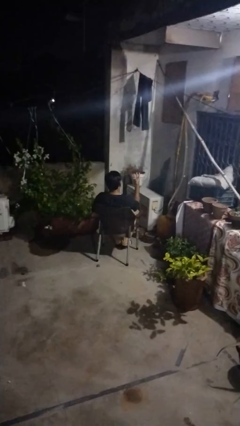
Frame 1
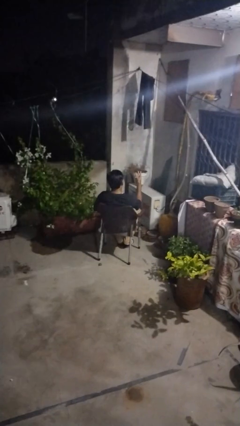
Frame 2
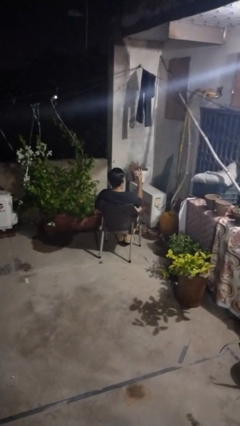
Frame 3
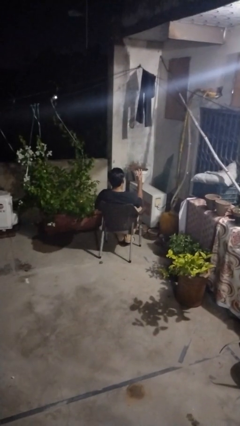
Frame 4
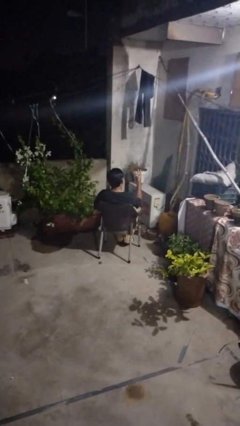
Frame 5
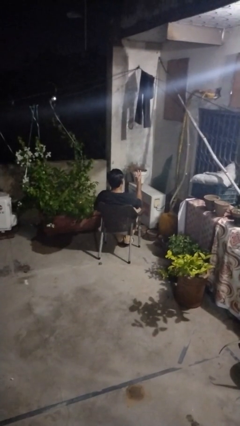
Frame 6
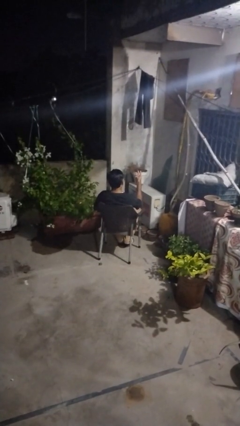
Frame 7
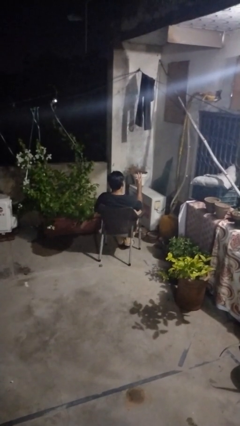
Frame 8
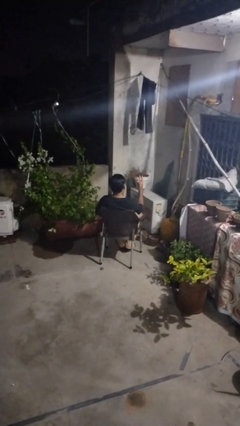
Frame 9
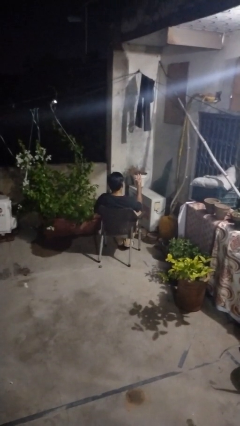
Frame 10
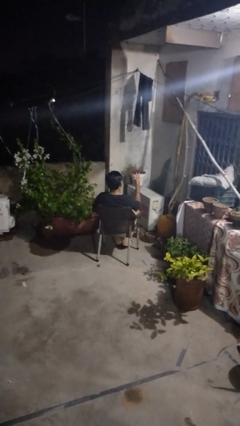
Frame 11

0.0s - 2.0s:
person gestures number three

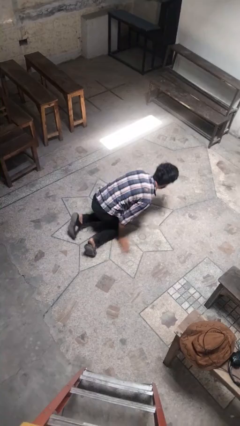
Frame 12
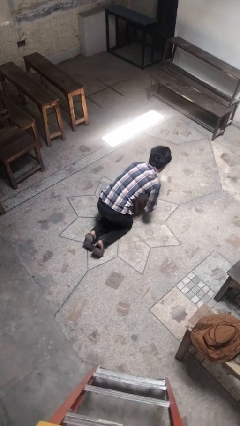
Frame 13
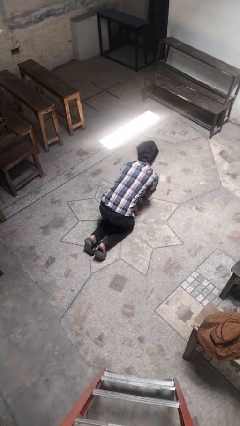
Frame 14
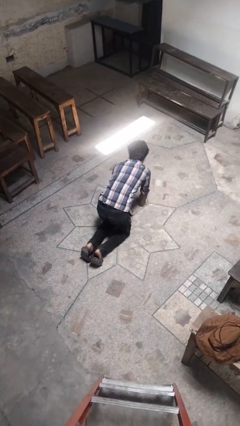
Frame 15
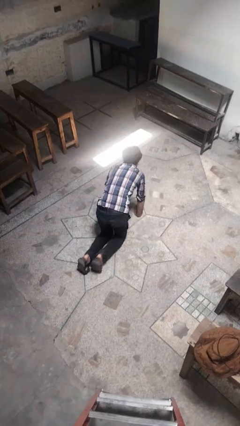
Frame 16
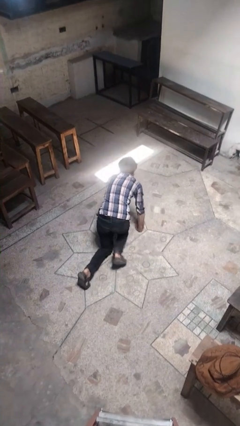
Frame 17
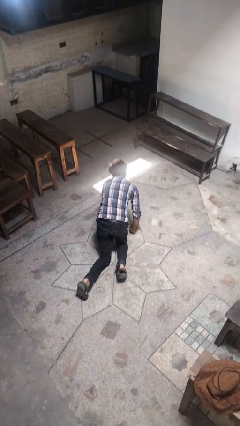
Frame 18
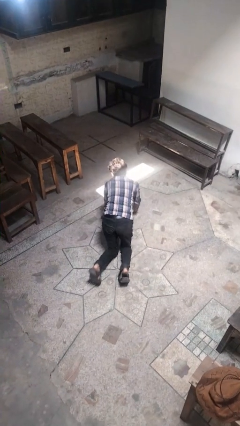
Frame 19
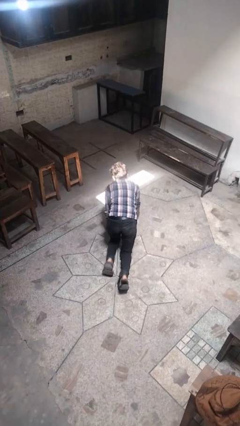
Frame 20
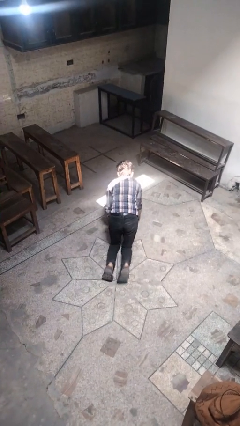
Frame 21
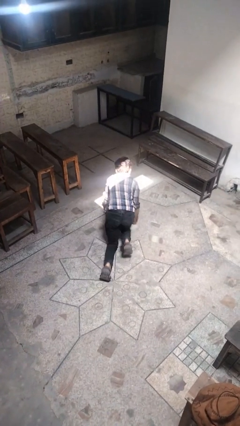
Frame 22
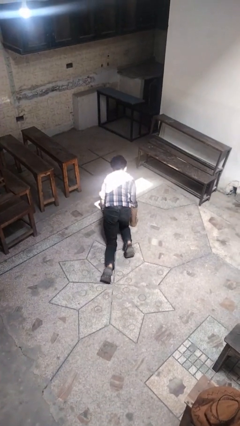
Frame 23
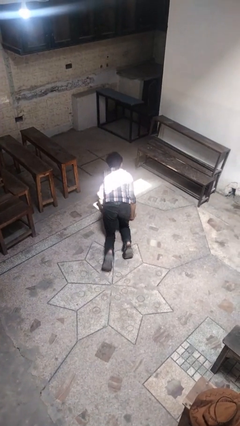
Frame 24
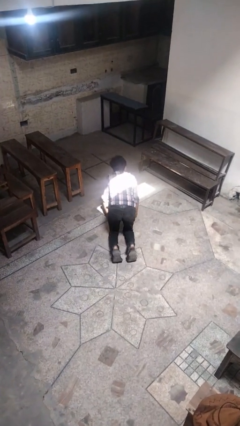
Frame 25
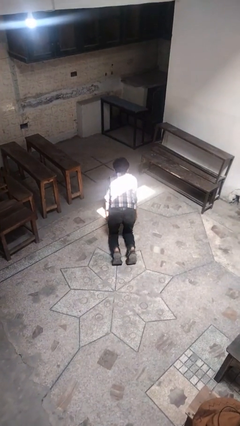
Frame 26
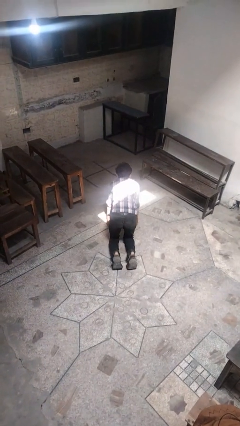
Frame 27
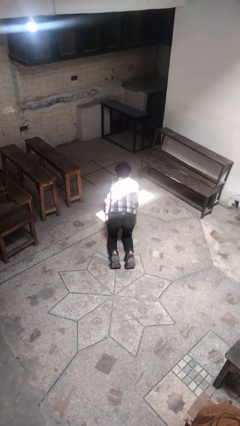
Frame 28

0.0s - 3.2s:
person crawls

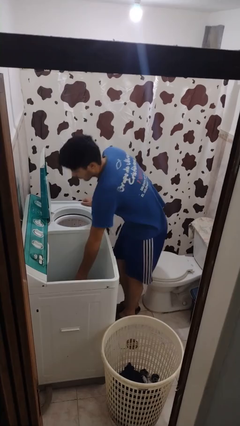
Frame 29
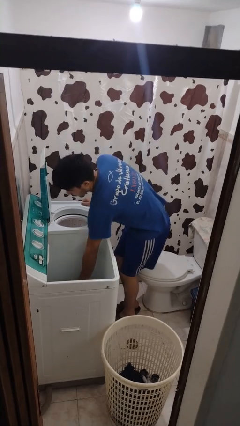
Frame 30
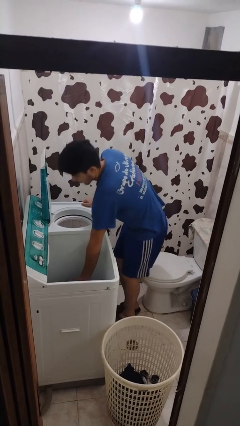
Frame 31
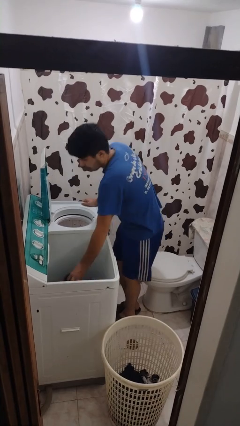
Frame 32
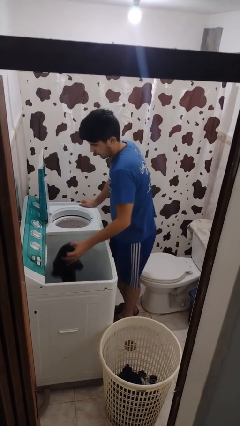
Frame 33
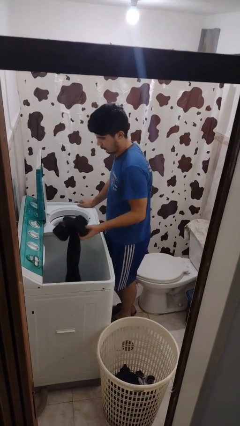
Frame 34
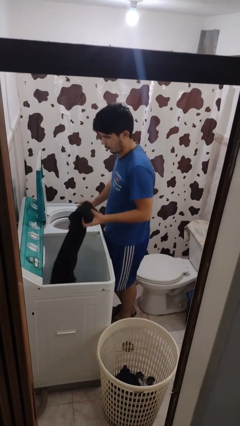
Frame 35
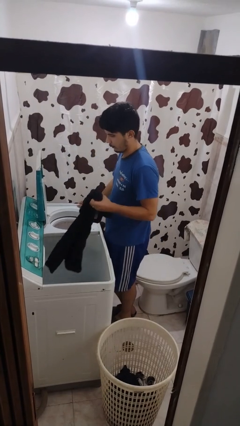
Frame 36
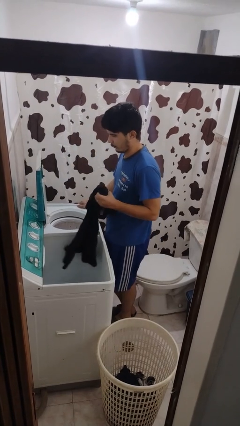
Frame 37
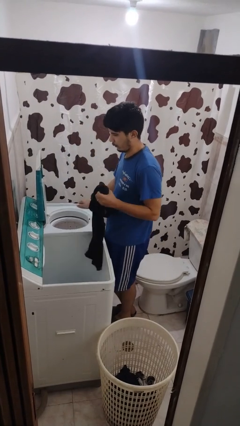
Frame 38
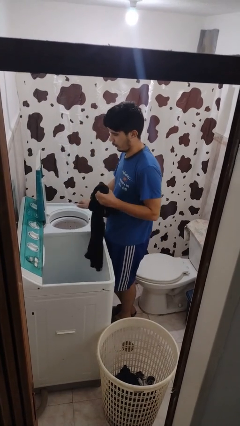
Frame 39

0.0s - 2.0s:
person unloads clotheswasher

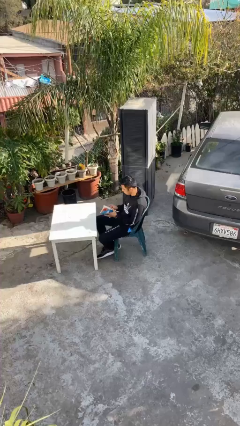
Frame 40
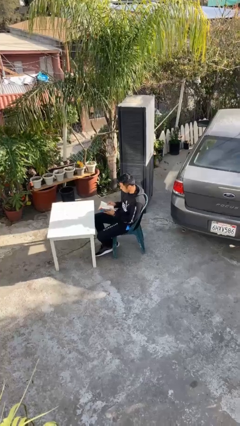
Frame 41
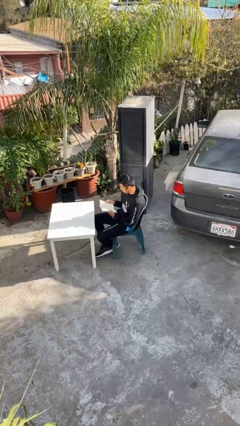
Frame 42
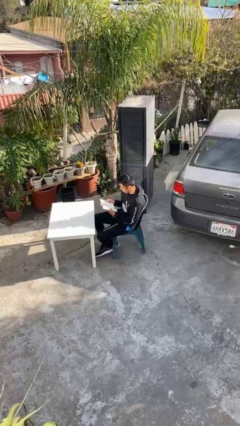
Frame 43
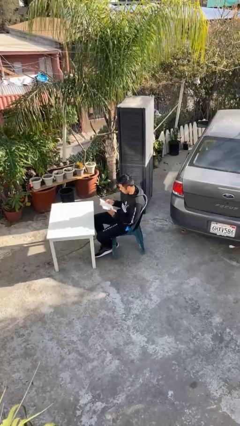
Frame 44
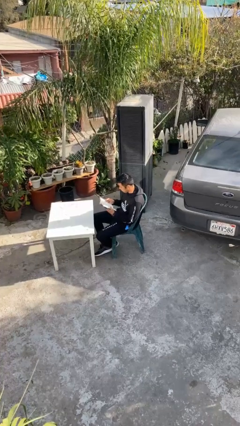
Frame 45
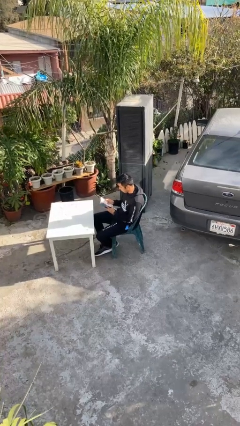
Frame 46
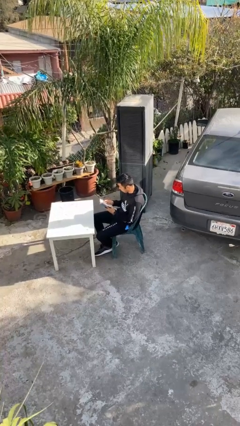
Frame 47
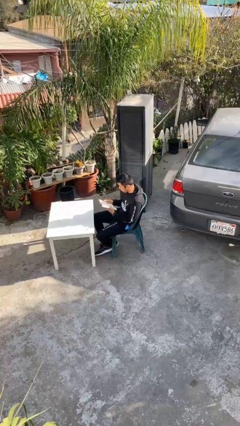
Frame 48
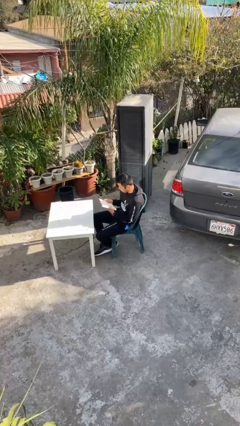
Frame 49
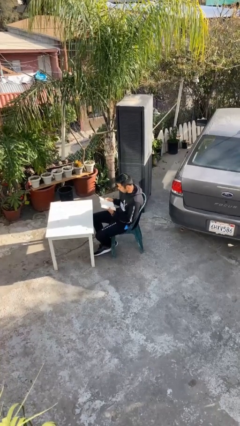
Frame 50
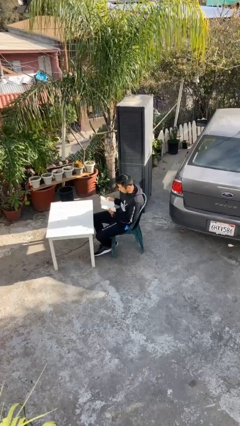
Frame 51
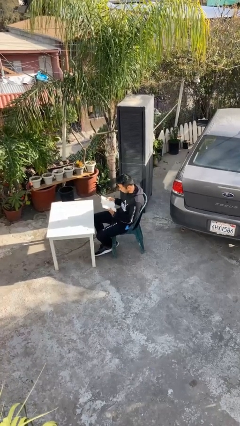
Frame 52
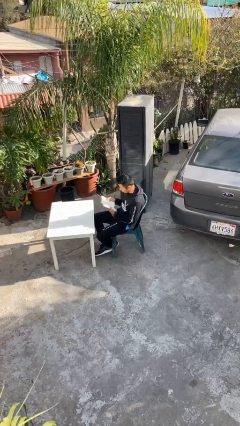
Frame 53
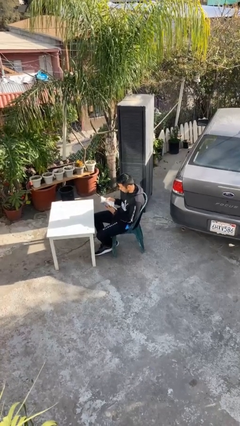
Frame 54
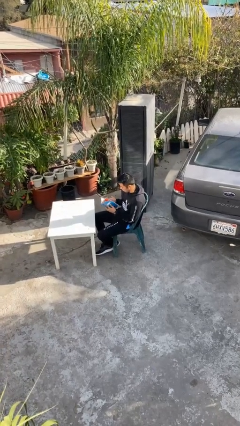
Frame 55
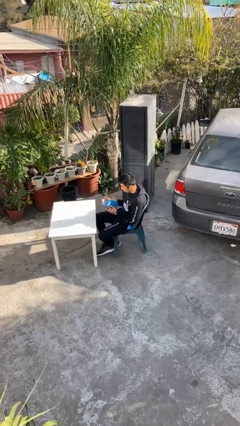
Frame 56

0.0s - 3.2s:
person reads document

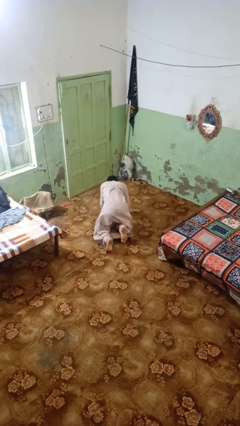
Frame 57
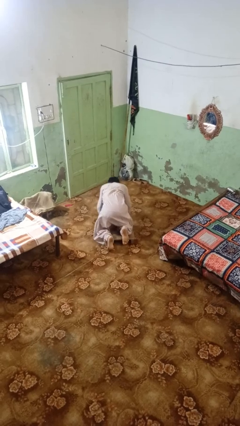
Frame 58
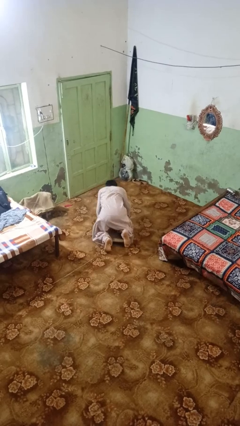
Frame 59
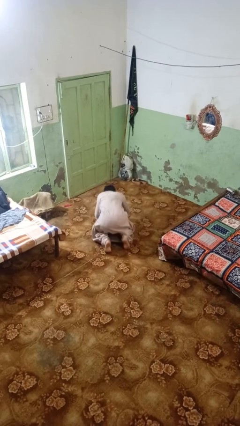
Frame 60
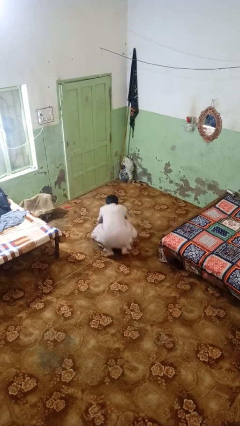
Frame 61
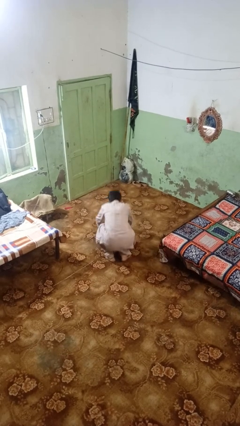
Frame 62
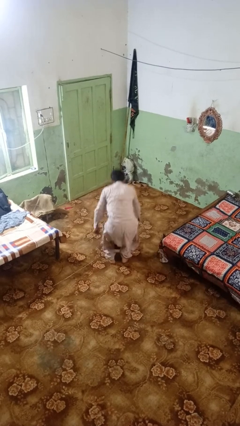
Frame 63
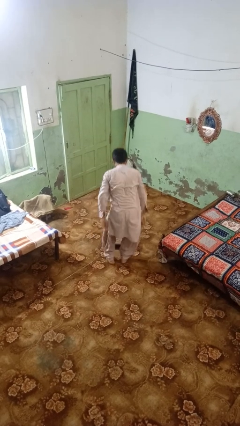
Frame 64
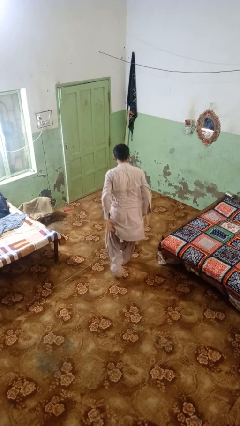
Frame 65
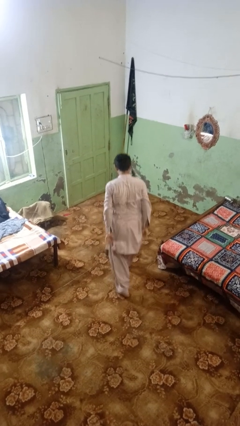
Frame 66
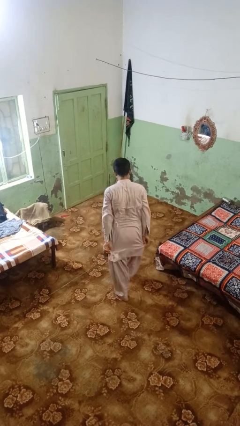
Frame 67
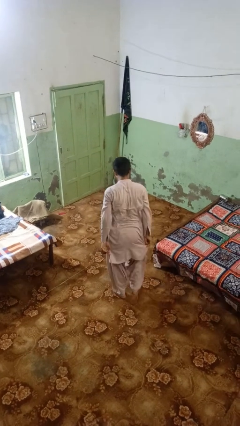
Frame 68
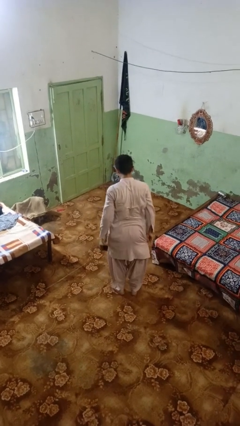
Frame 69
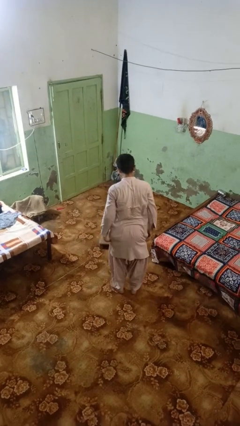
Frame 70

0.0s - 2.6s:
person stands up from floor

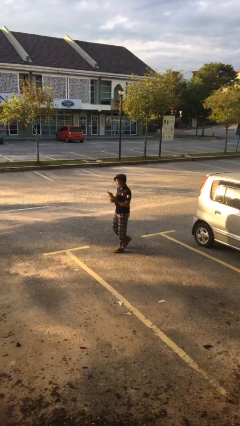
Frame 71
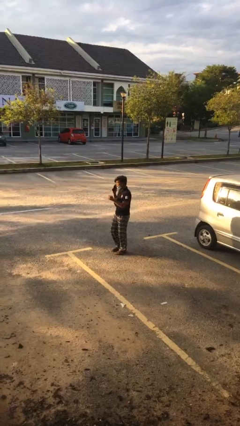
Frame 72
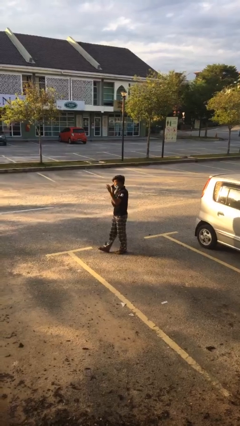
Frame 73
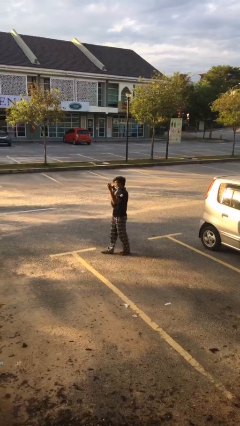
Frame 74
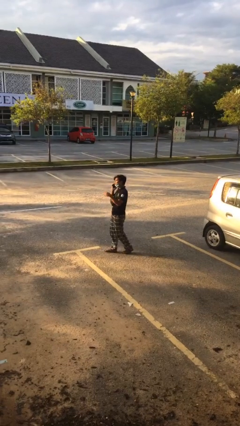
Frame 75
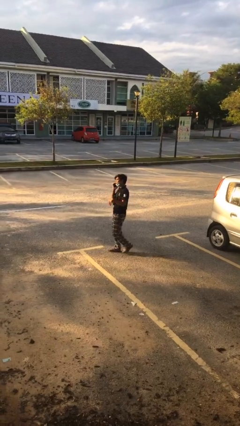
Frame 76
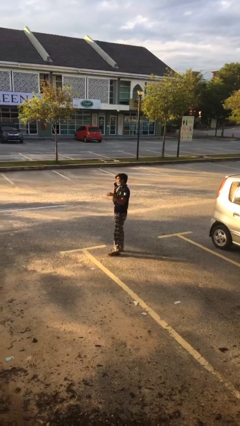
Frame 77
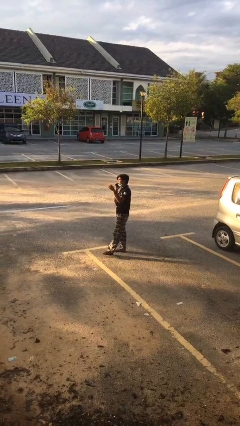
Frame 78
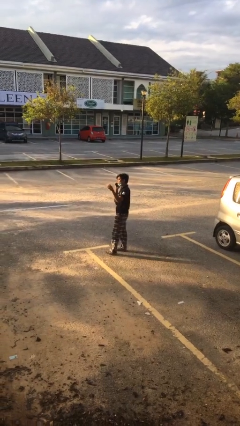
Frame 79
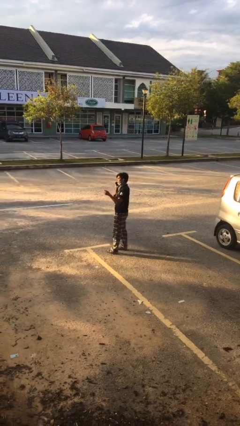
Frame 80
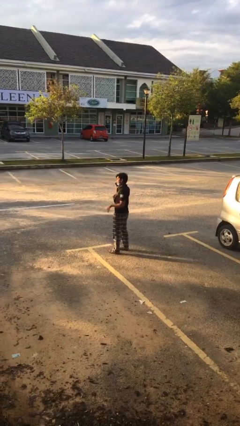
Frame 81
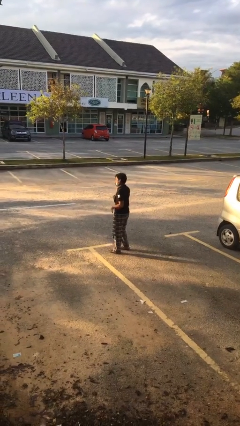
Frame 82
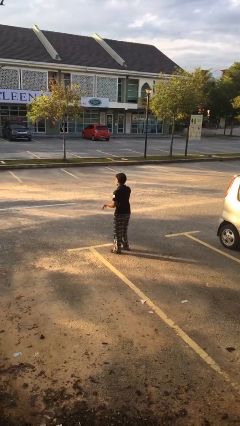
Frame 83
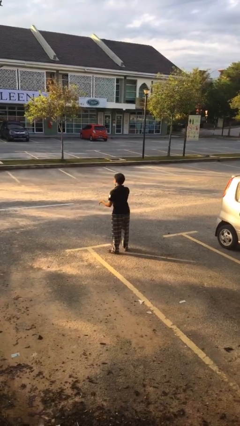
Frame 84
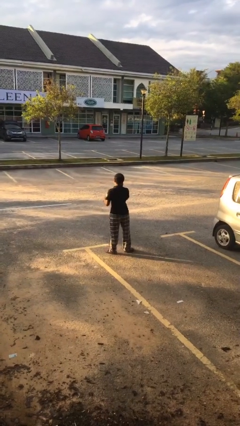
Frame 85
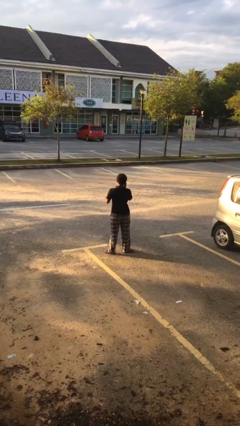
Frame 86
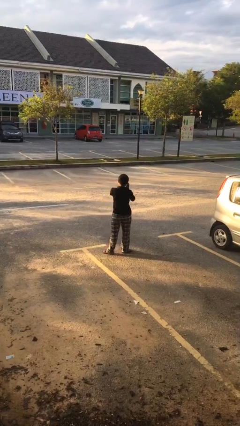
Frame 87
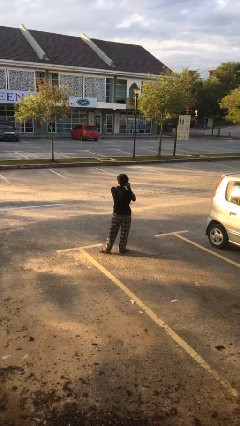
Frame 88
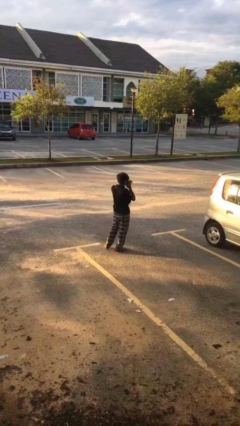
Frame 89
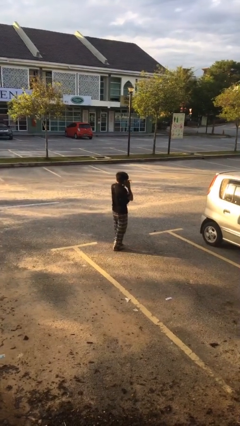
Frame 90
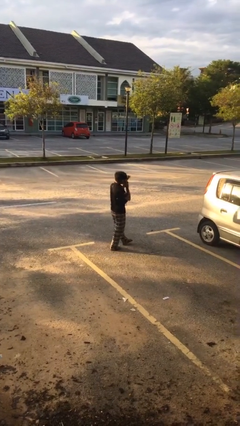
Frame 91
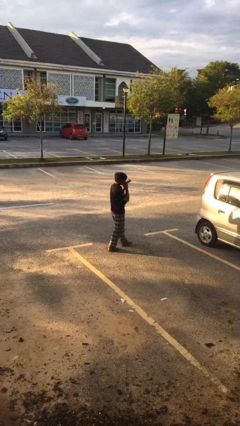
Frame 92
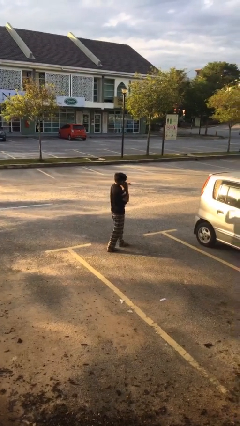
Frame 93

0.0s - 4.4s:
person talks on phone
